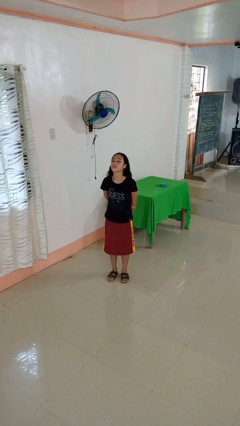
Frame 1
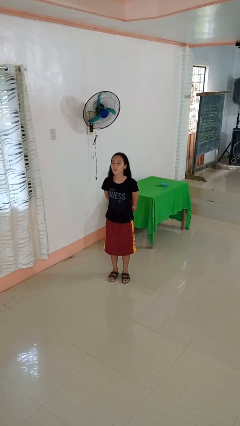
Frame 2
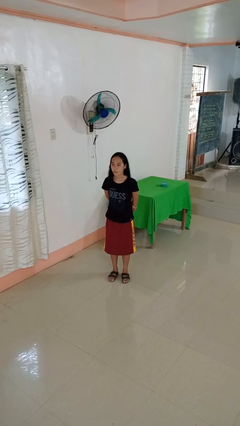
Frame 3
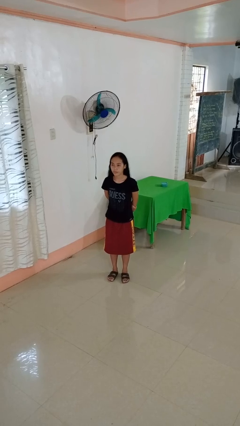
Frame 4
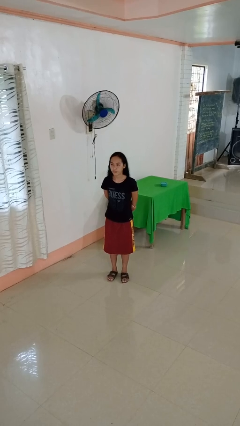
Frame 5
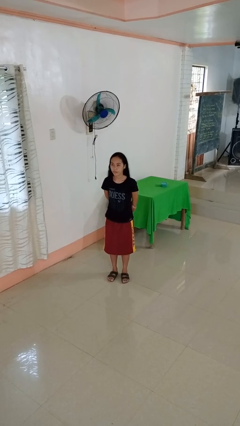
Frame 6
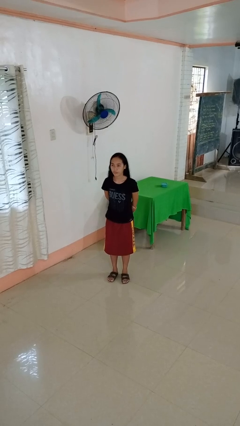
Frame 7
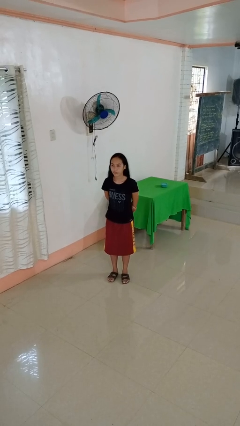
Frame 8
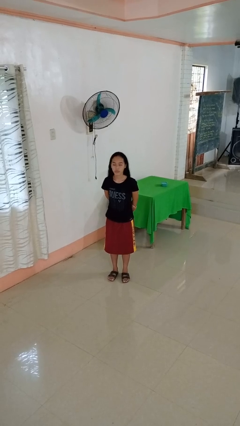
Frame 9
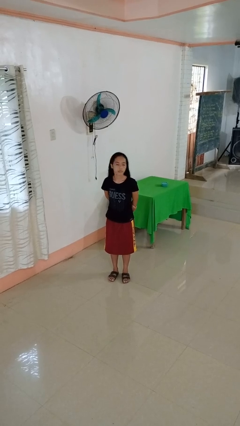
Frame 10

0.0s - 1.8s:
person nods head

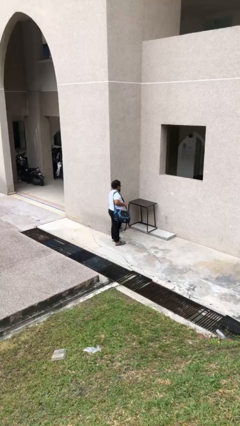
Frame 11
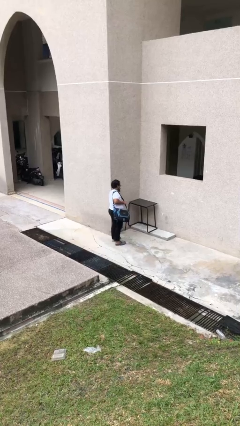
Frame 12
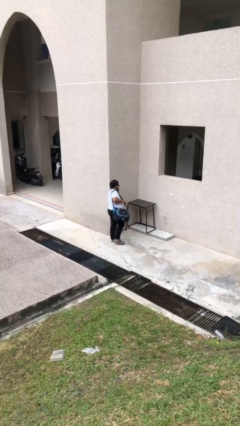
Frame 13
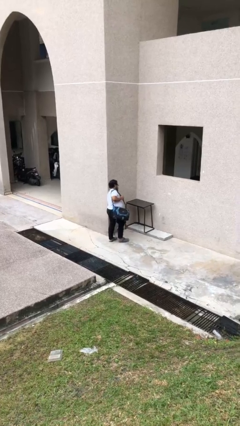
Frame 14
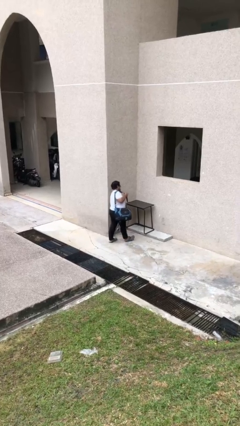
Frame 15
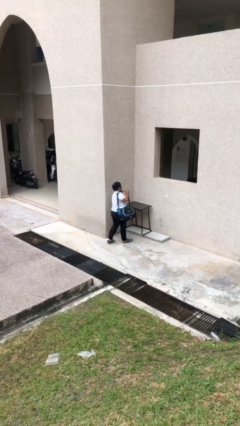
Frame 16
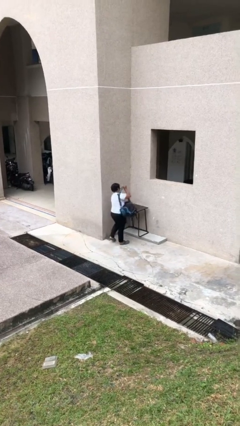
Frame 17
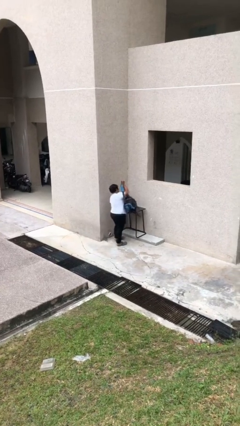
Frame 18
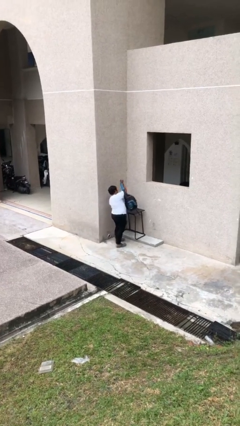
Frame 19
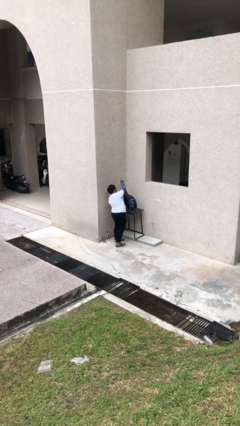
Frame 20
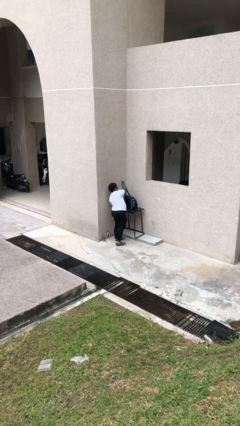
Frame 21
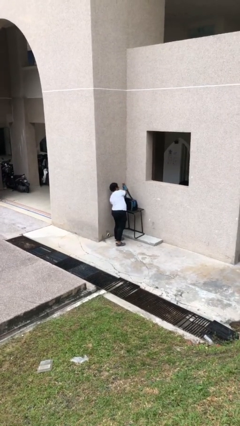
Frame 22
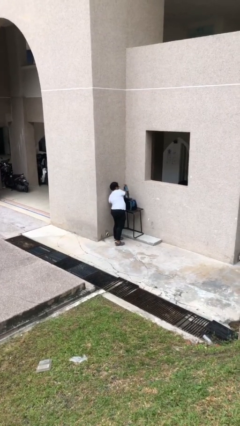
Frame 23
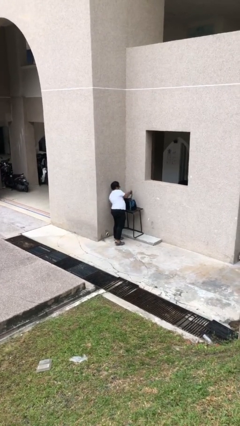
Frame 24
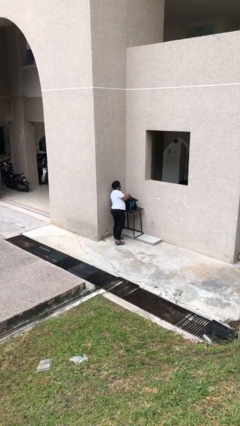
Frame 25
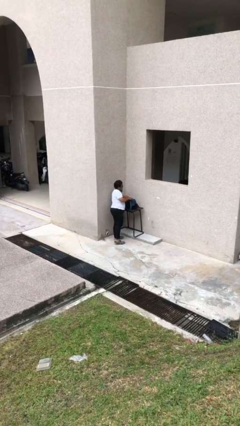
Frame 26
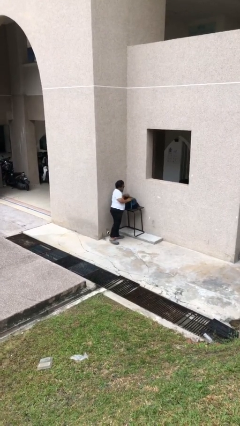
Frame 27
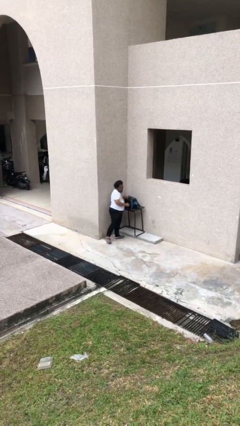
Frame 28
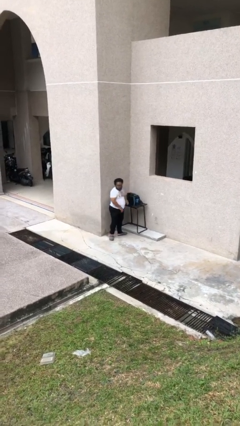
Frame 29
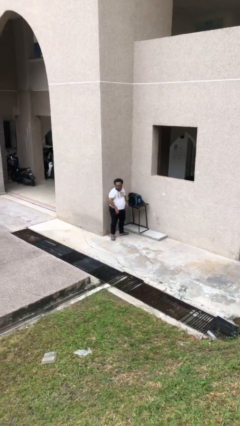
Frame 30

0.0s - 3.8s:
person puts down object on table

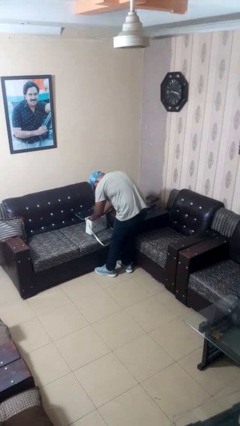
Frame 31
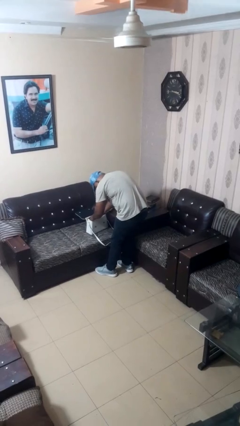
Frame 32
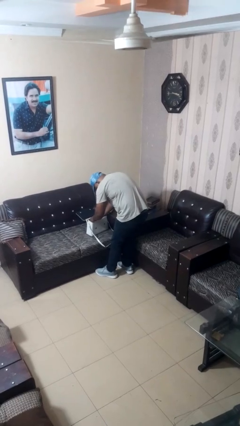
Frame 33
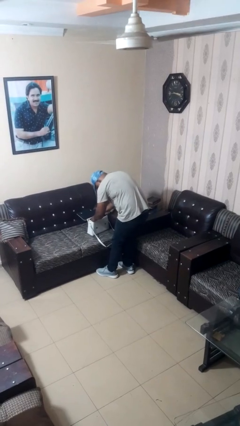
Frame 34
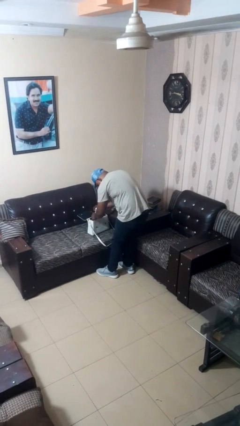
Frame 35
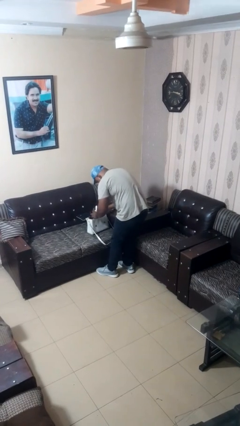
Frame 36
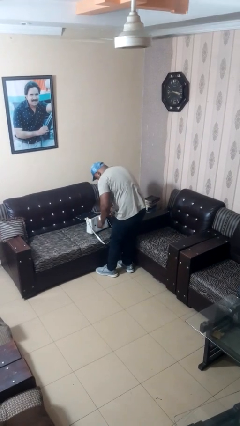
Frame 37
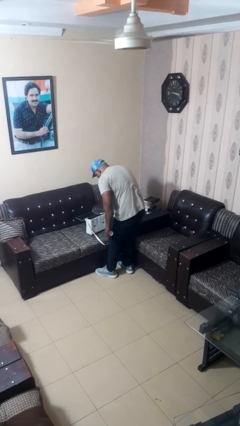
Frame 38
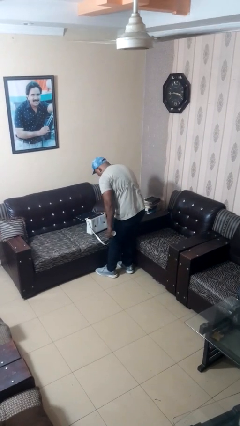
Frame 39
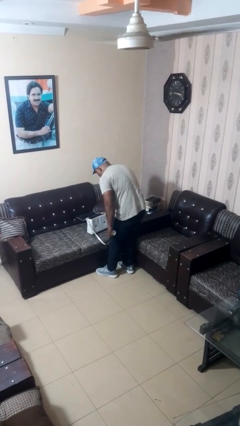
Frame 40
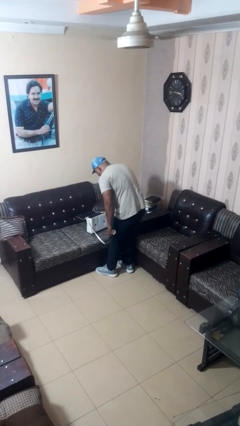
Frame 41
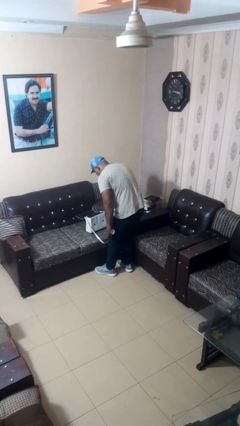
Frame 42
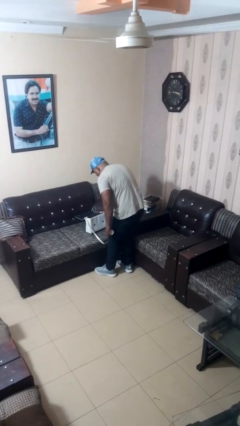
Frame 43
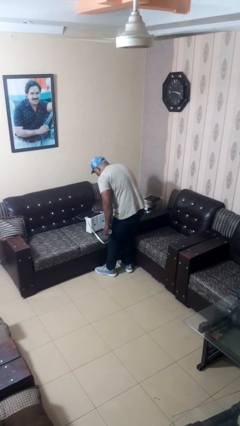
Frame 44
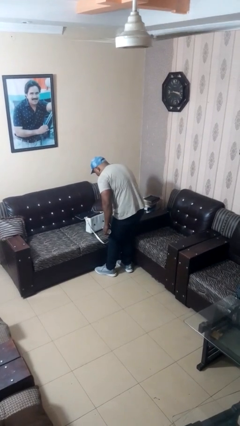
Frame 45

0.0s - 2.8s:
person takes object from purse

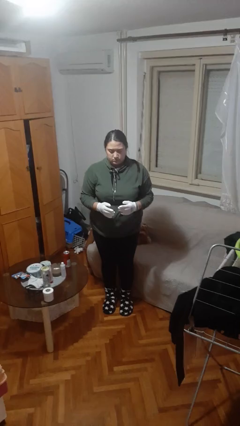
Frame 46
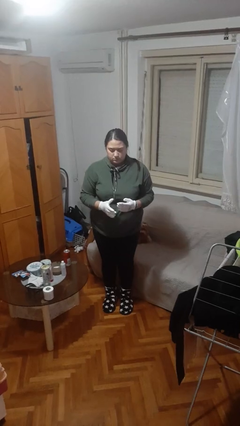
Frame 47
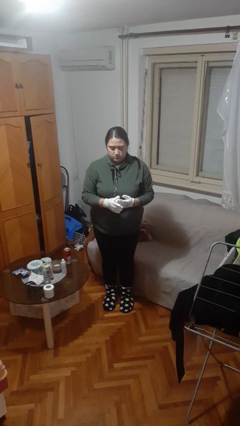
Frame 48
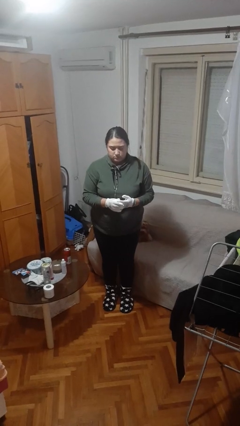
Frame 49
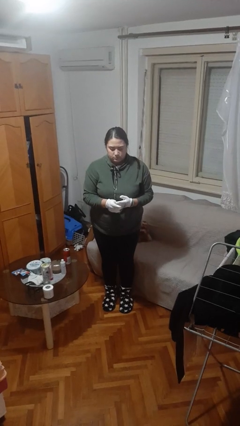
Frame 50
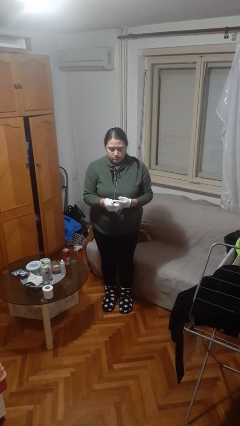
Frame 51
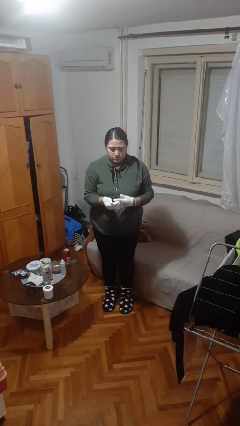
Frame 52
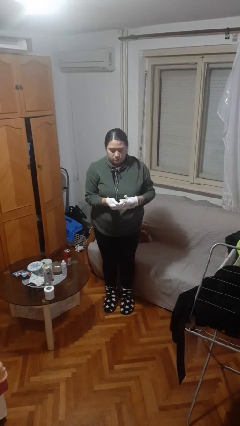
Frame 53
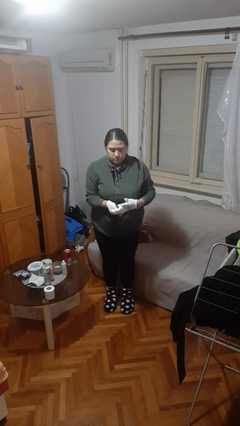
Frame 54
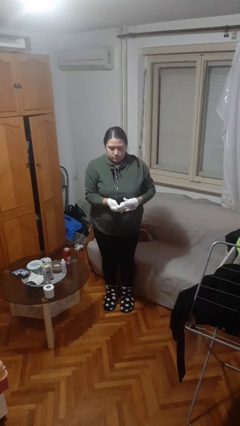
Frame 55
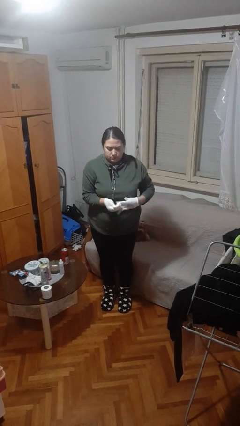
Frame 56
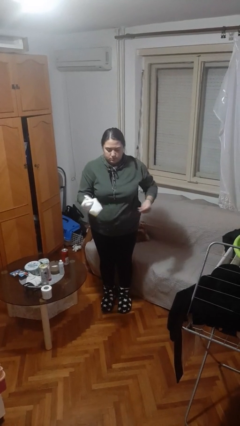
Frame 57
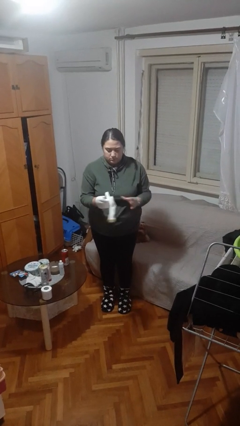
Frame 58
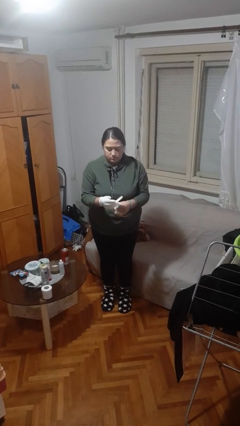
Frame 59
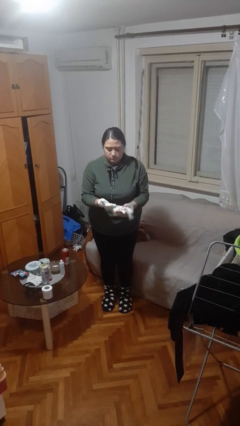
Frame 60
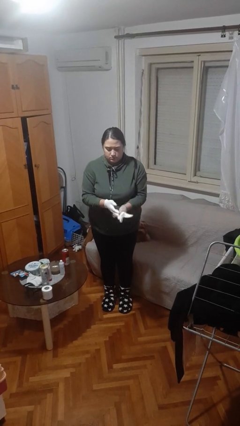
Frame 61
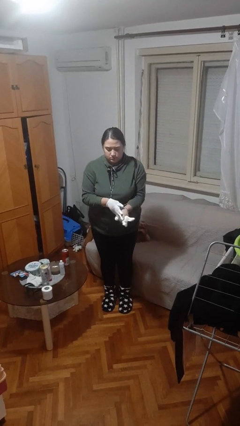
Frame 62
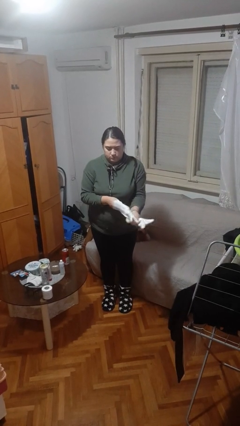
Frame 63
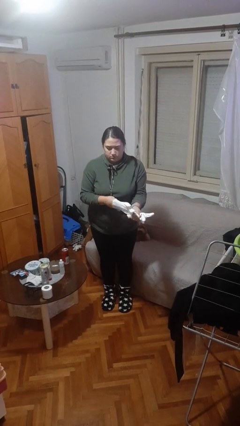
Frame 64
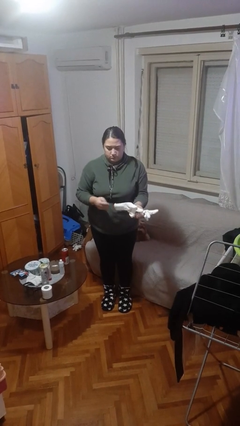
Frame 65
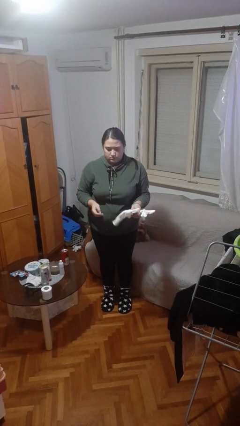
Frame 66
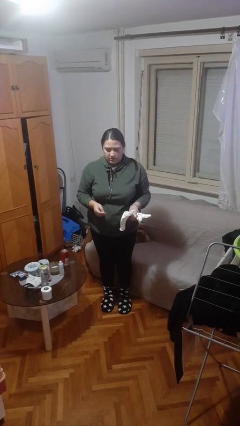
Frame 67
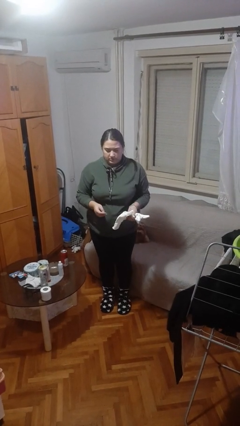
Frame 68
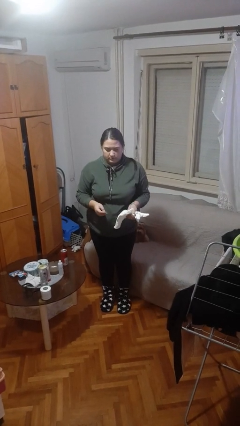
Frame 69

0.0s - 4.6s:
person takes off gloves

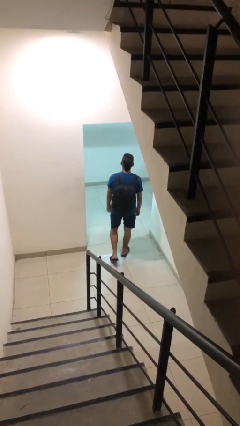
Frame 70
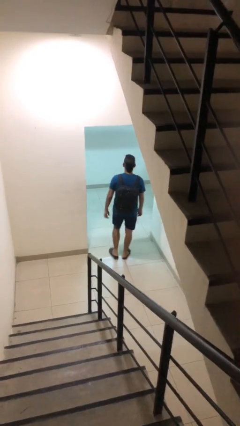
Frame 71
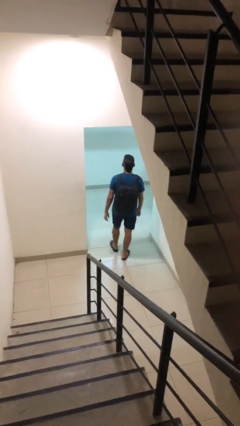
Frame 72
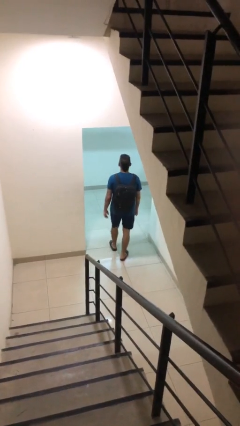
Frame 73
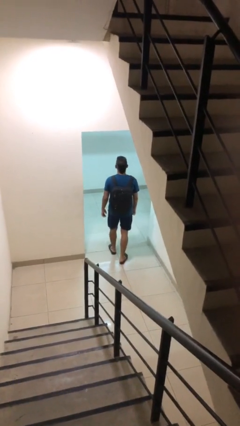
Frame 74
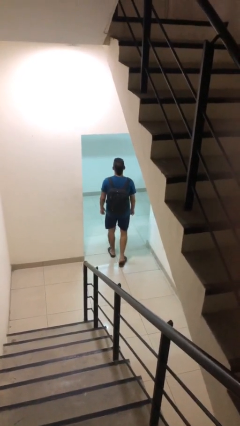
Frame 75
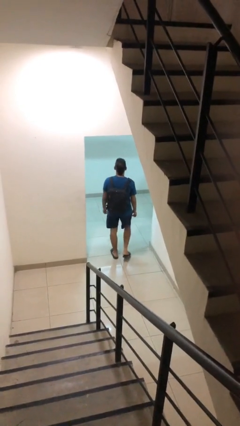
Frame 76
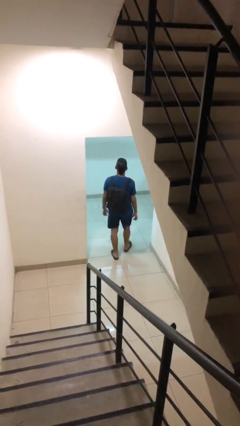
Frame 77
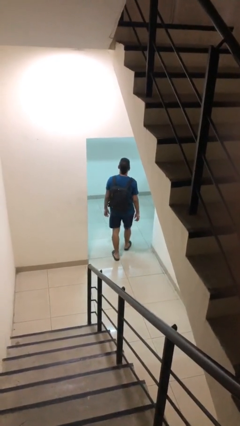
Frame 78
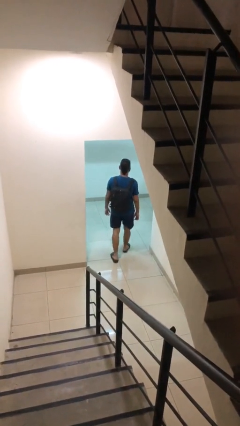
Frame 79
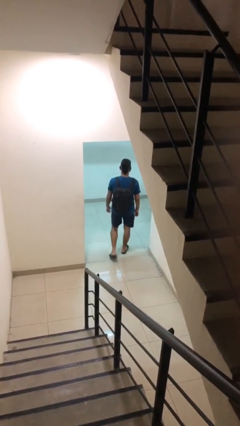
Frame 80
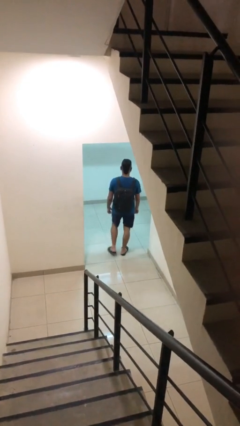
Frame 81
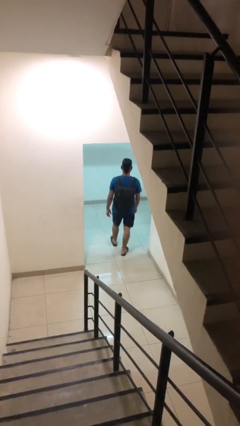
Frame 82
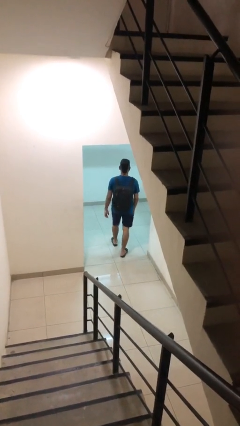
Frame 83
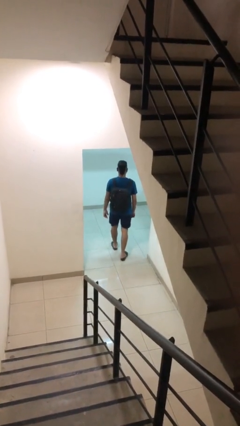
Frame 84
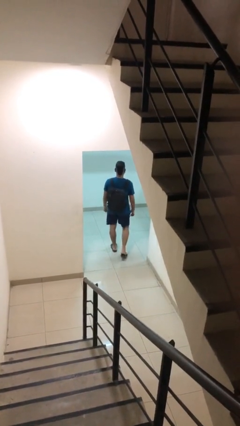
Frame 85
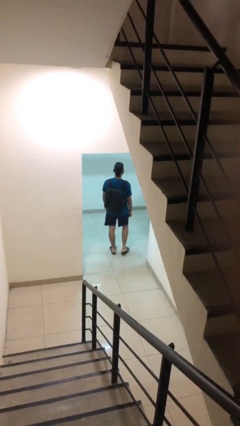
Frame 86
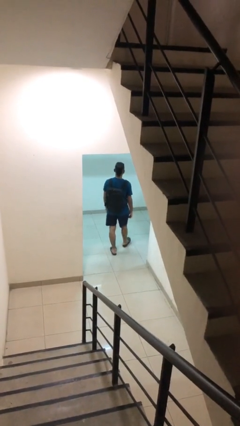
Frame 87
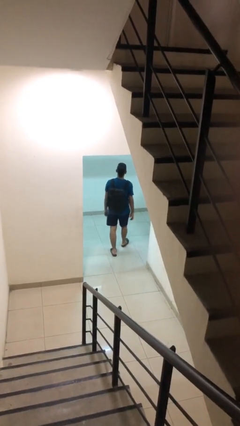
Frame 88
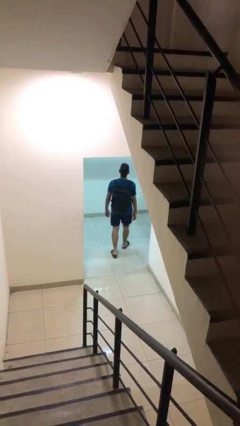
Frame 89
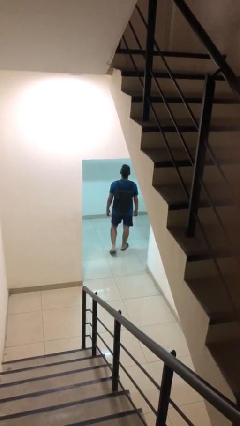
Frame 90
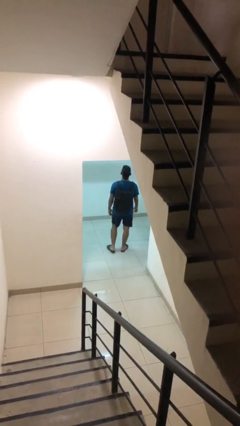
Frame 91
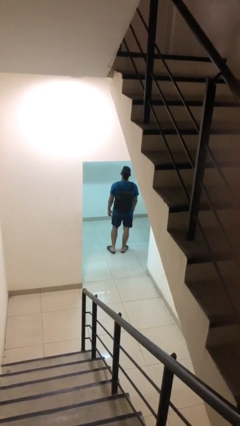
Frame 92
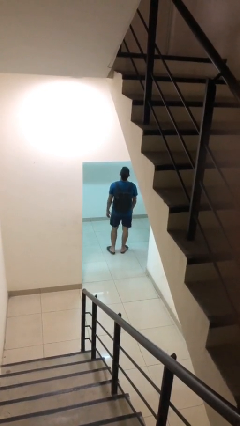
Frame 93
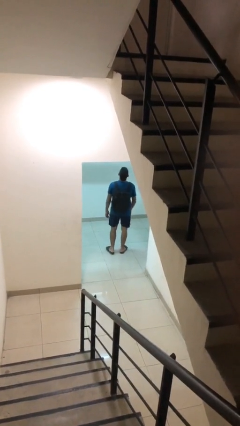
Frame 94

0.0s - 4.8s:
person exits scene through structure
